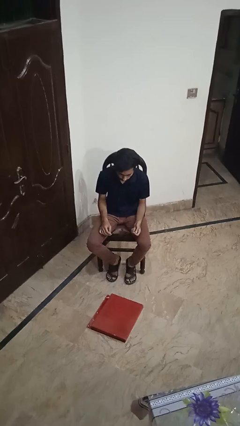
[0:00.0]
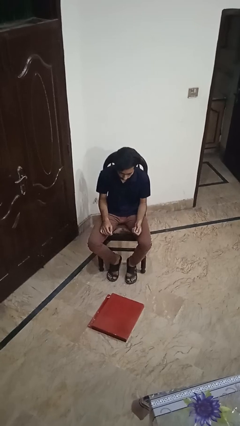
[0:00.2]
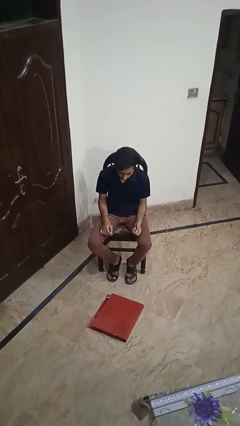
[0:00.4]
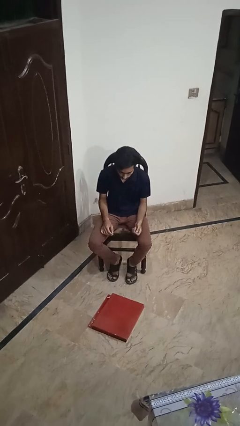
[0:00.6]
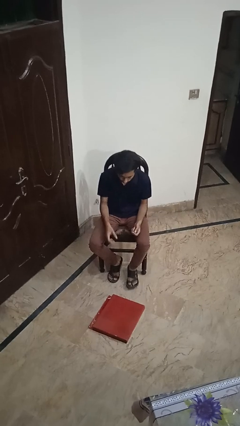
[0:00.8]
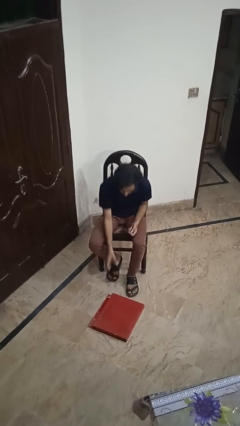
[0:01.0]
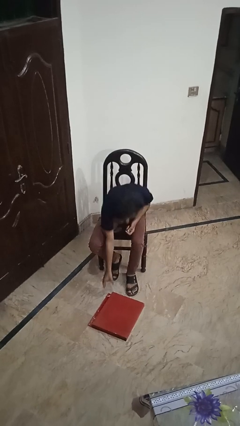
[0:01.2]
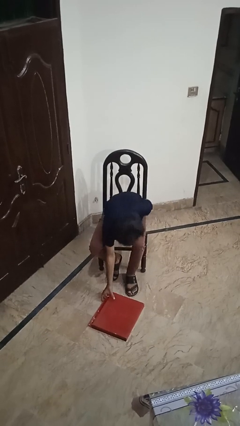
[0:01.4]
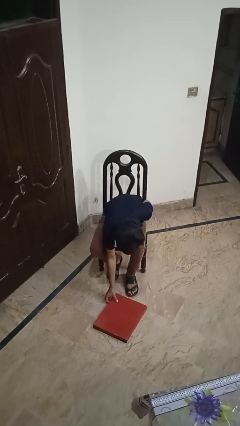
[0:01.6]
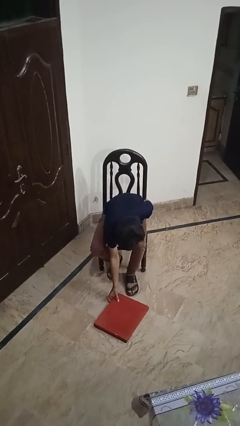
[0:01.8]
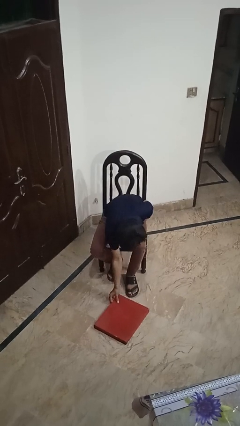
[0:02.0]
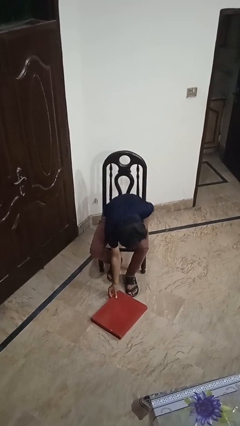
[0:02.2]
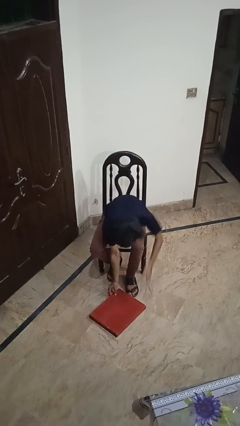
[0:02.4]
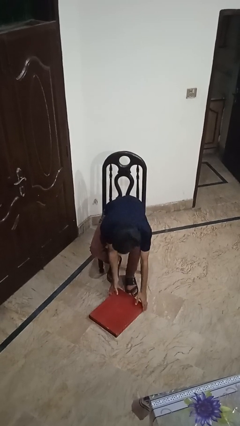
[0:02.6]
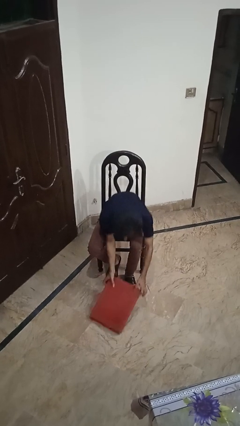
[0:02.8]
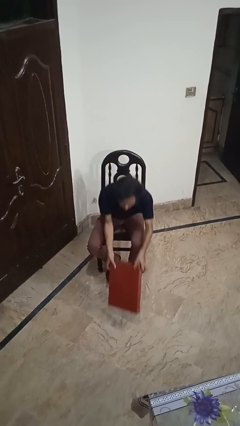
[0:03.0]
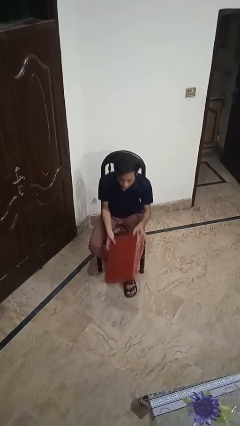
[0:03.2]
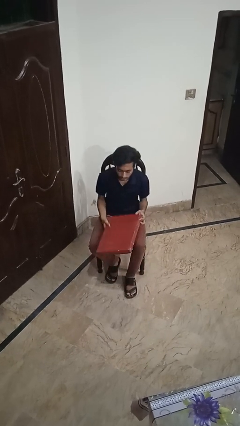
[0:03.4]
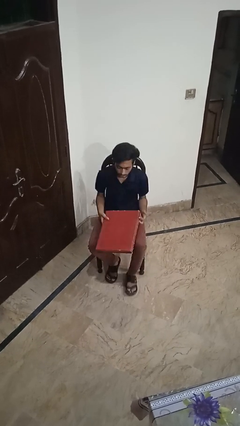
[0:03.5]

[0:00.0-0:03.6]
person picks up object from floor

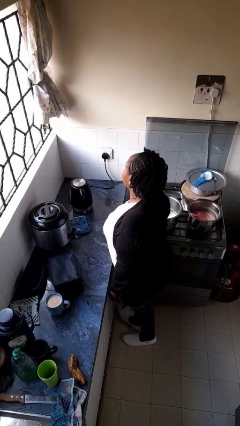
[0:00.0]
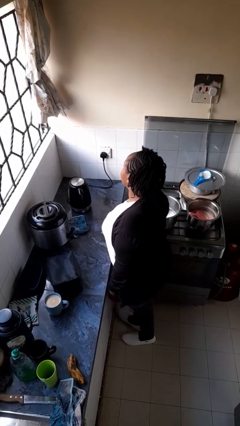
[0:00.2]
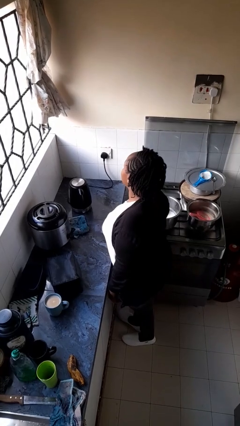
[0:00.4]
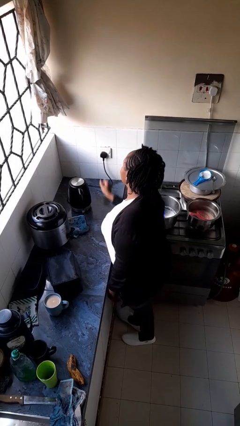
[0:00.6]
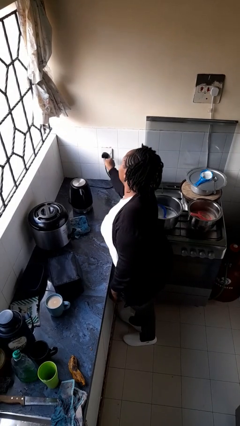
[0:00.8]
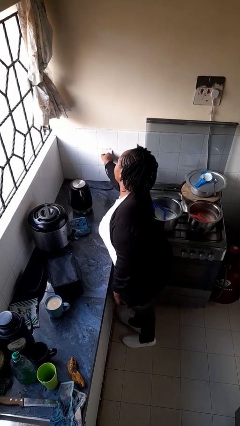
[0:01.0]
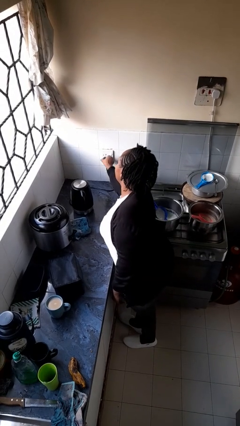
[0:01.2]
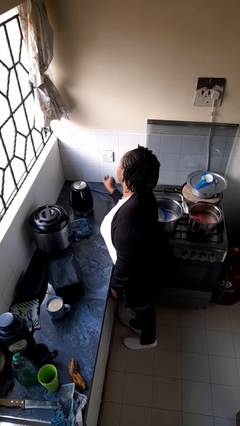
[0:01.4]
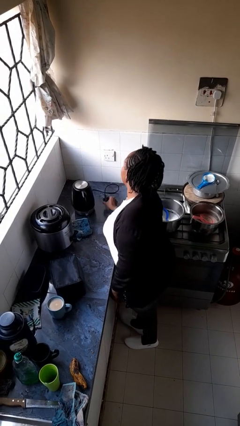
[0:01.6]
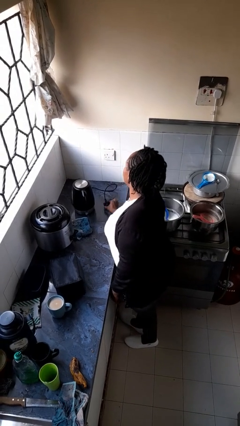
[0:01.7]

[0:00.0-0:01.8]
person unplugs from electrical socket

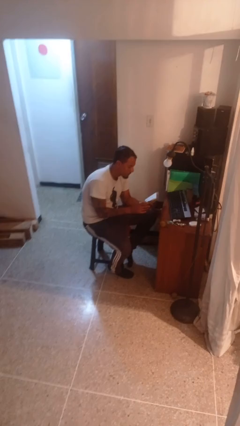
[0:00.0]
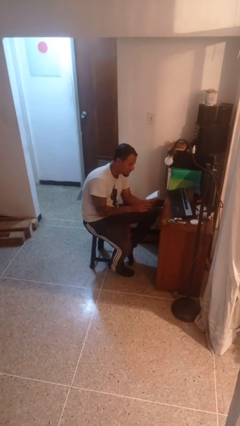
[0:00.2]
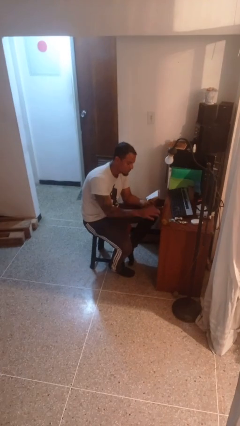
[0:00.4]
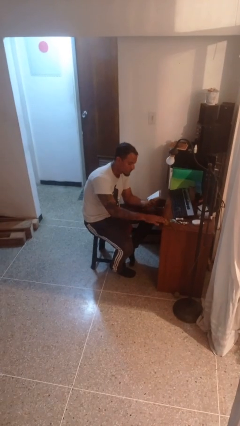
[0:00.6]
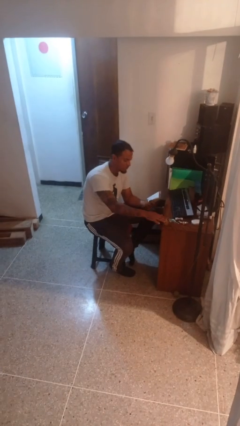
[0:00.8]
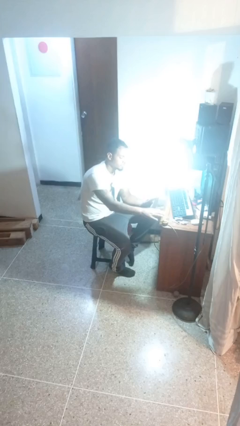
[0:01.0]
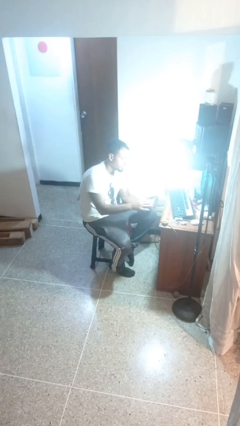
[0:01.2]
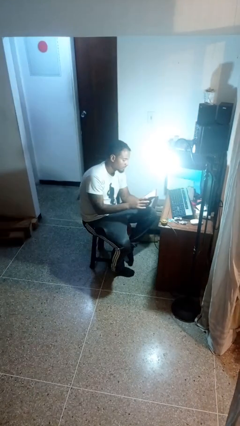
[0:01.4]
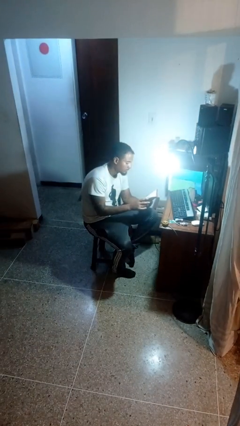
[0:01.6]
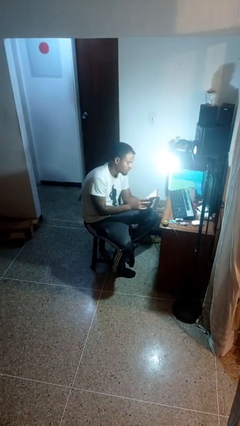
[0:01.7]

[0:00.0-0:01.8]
person turns on lamp

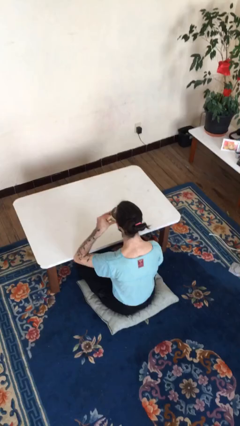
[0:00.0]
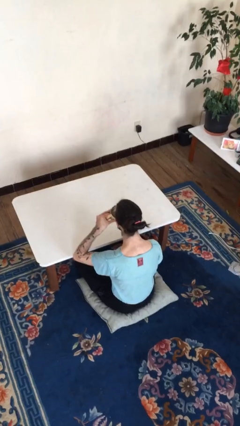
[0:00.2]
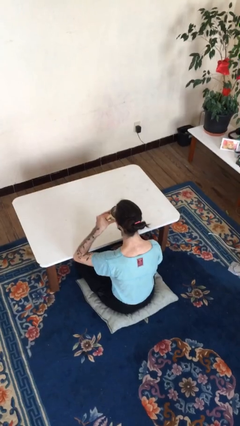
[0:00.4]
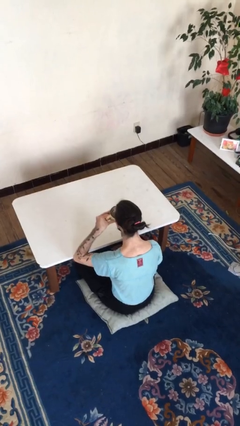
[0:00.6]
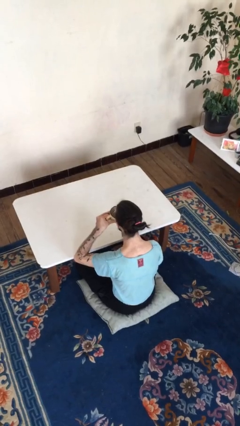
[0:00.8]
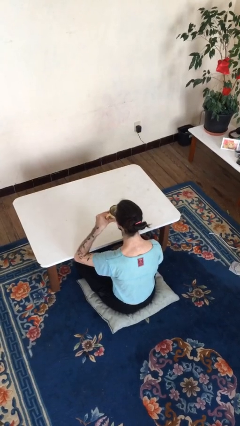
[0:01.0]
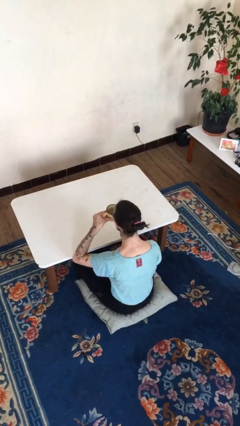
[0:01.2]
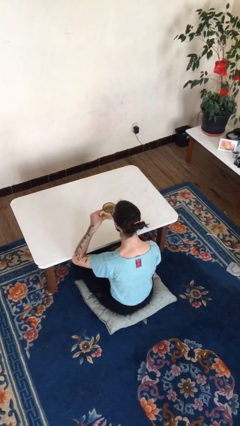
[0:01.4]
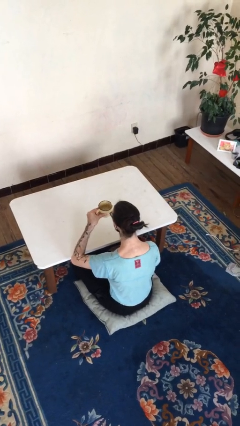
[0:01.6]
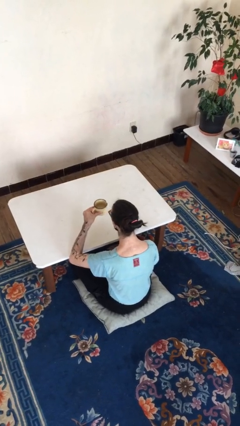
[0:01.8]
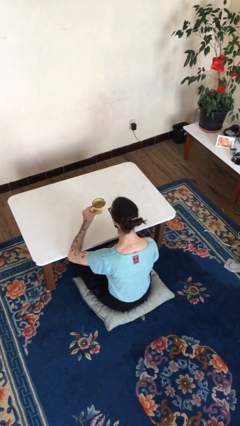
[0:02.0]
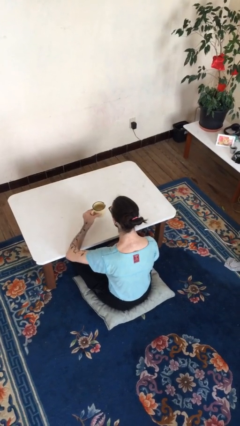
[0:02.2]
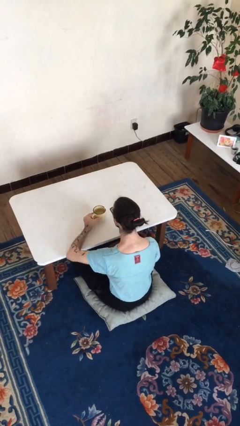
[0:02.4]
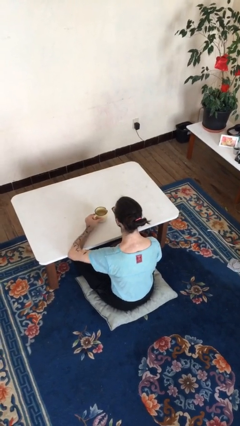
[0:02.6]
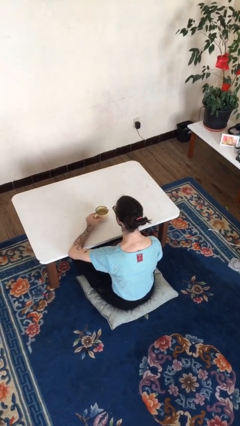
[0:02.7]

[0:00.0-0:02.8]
person puts down object on table

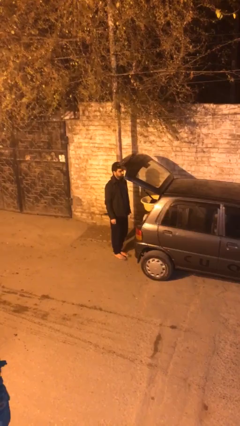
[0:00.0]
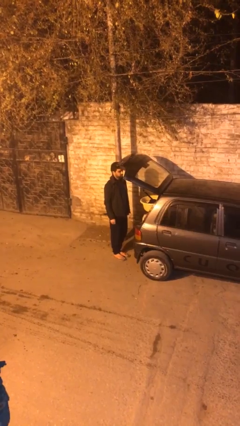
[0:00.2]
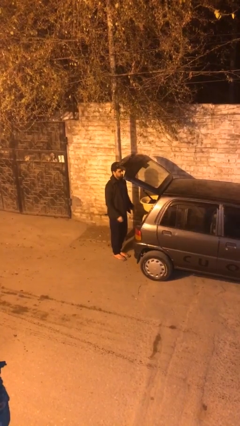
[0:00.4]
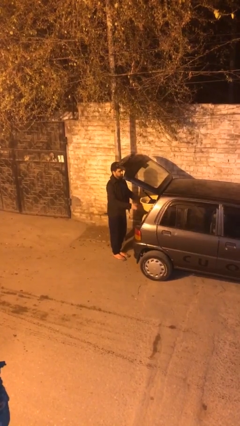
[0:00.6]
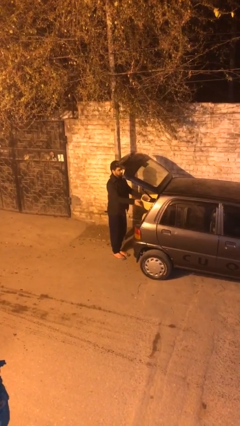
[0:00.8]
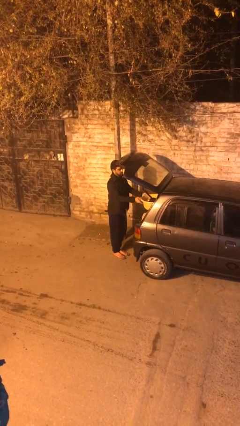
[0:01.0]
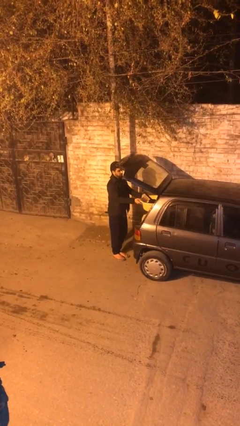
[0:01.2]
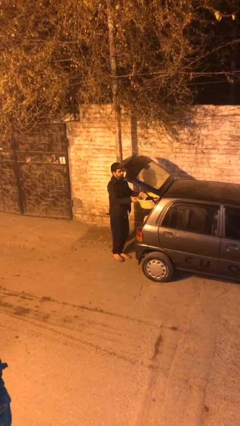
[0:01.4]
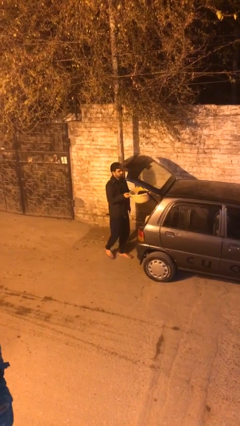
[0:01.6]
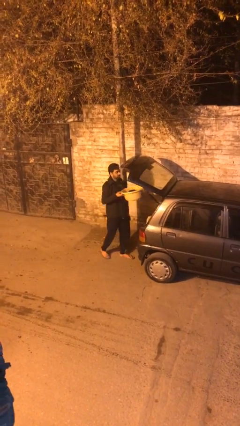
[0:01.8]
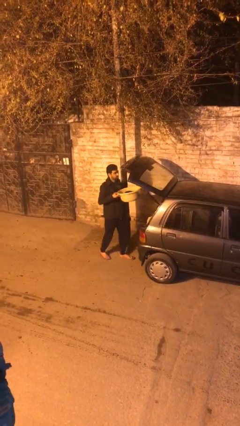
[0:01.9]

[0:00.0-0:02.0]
person unloads car

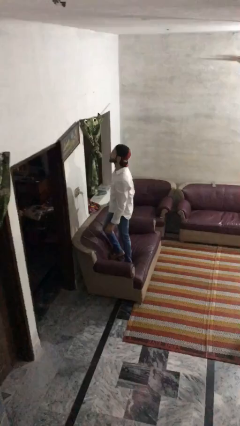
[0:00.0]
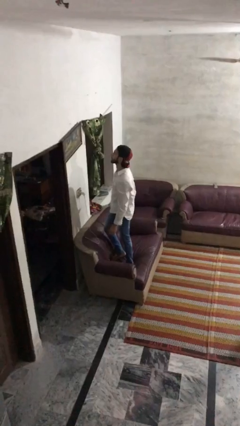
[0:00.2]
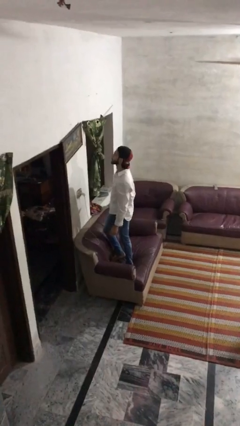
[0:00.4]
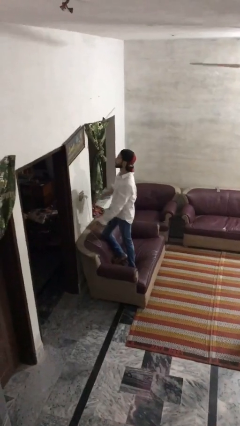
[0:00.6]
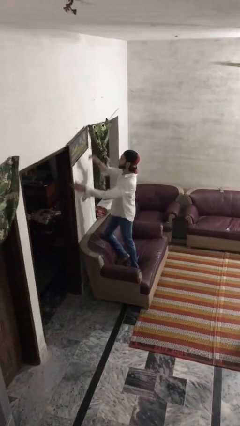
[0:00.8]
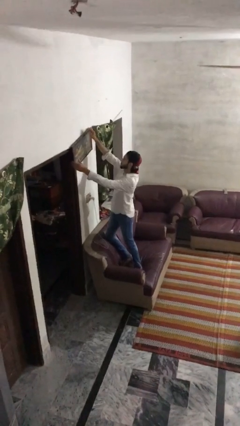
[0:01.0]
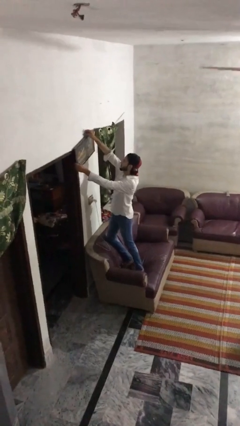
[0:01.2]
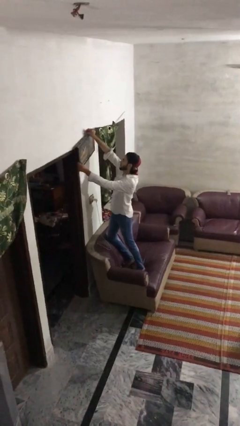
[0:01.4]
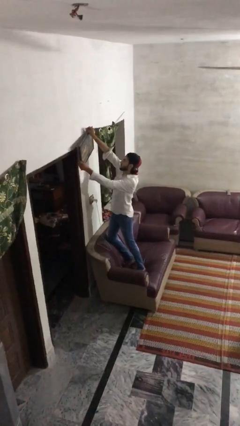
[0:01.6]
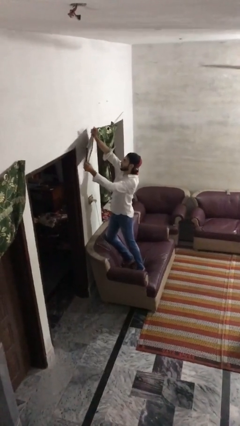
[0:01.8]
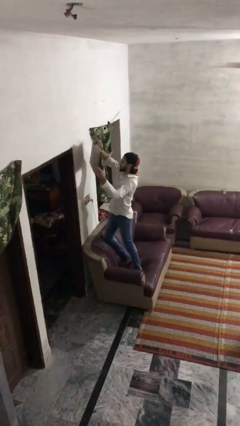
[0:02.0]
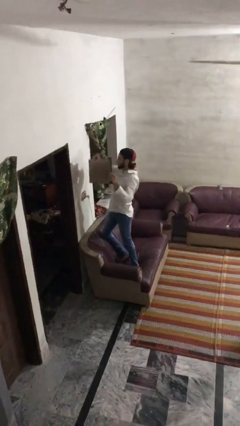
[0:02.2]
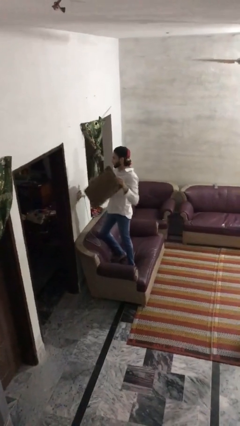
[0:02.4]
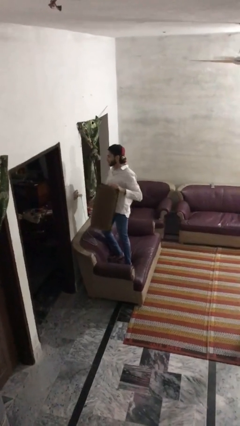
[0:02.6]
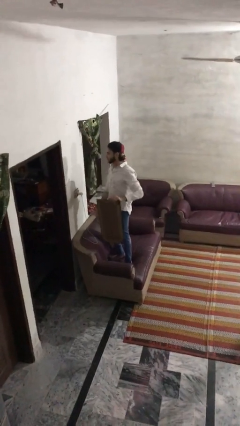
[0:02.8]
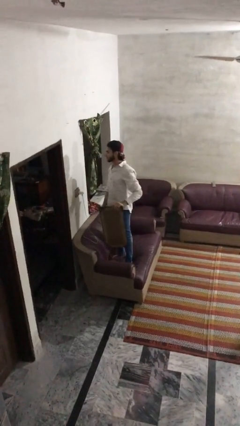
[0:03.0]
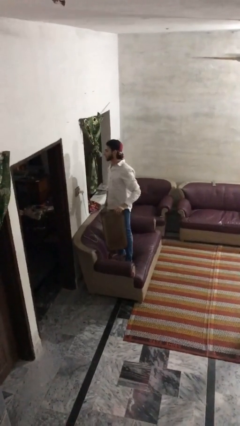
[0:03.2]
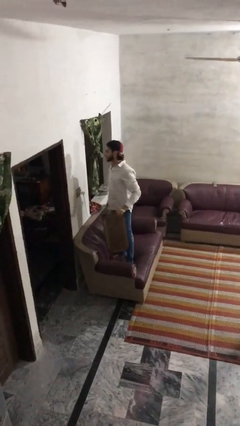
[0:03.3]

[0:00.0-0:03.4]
person takes down picture frame

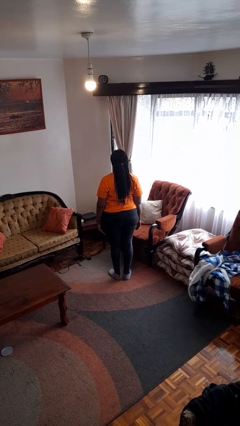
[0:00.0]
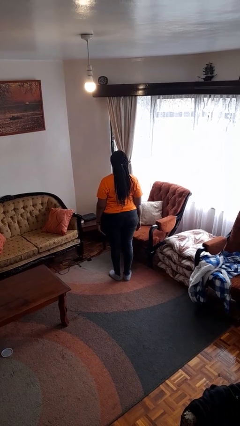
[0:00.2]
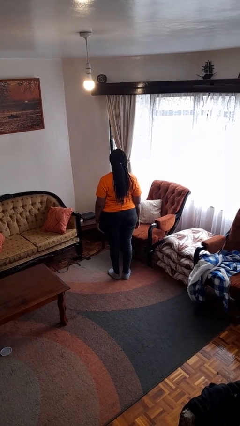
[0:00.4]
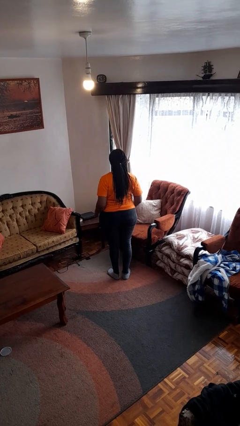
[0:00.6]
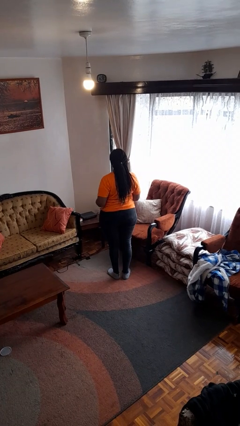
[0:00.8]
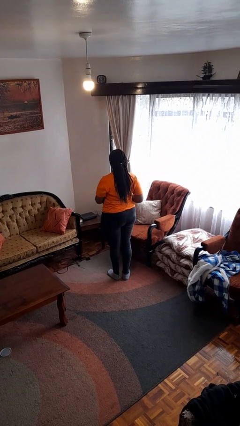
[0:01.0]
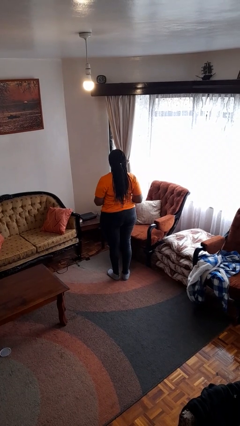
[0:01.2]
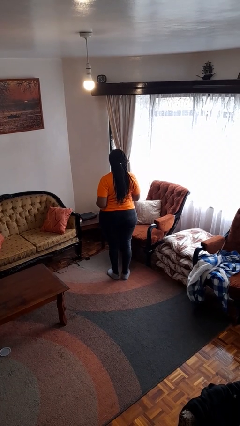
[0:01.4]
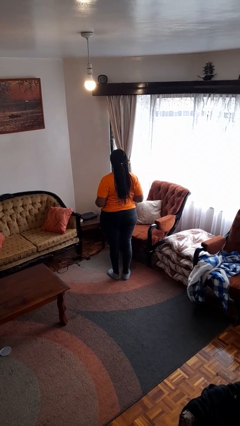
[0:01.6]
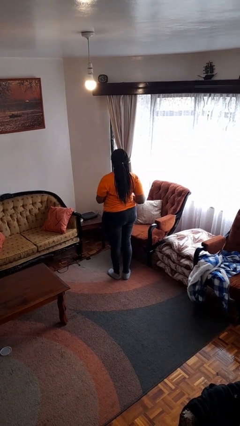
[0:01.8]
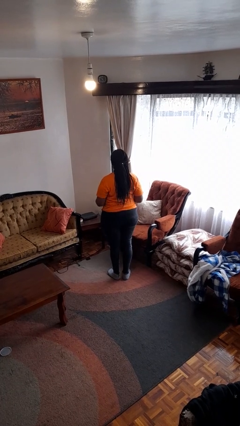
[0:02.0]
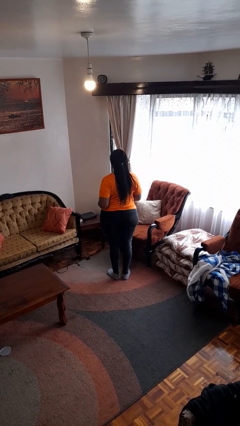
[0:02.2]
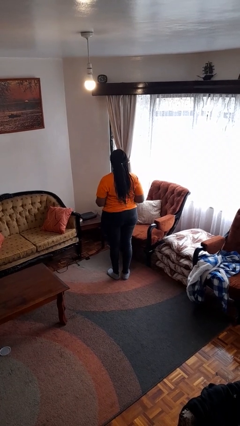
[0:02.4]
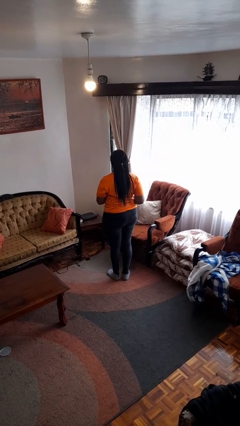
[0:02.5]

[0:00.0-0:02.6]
person wiggles hips
